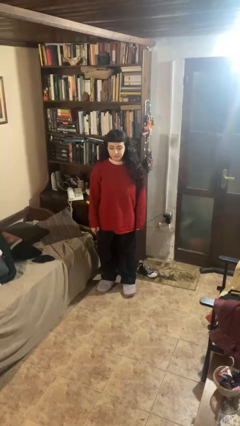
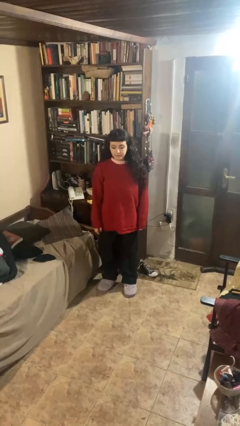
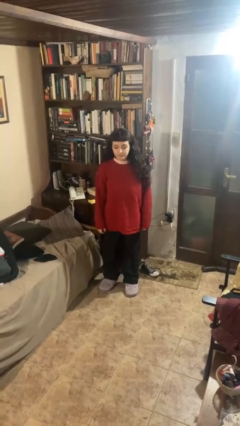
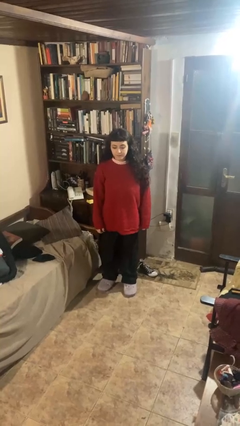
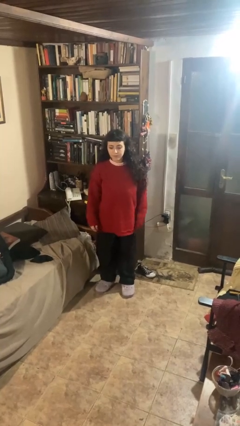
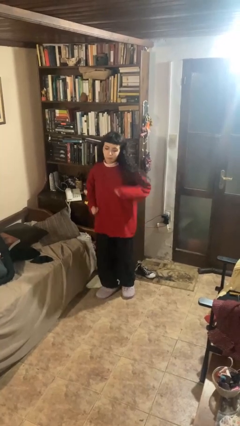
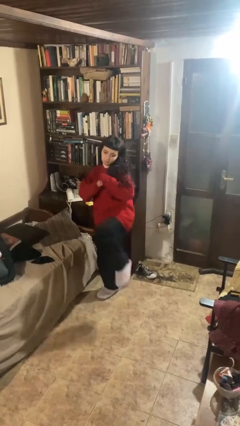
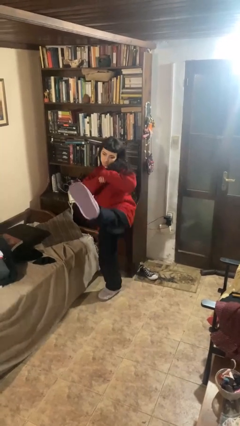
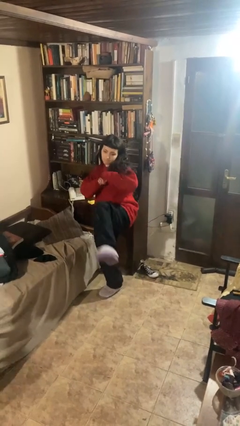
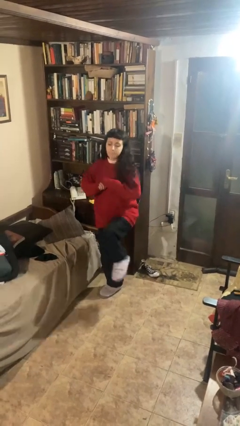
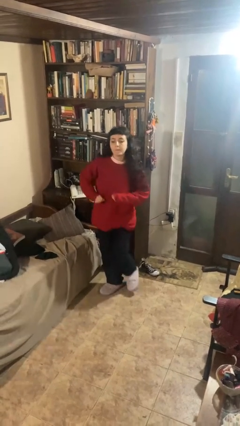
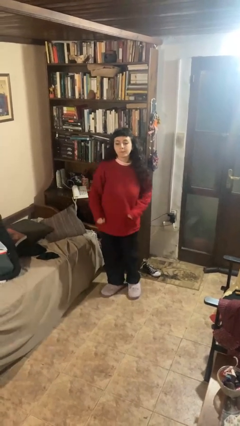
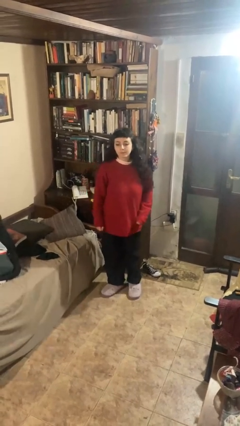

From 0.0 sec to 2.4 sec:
person karate kicks

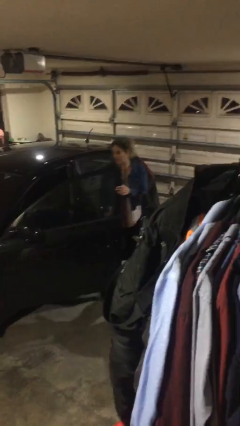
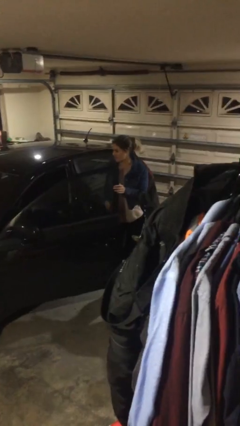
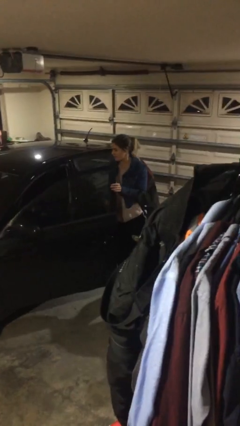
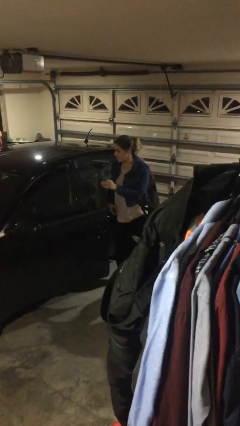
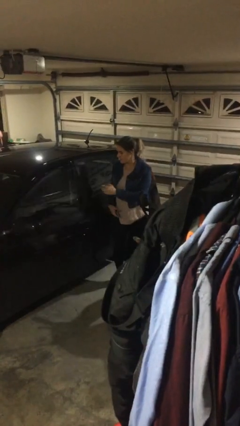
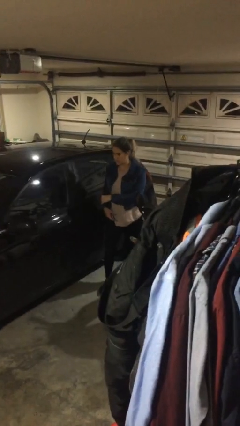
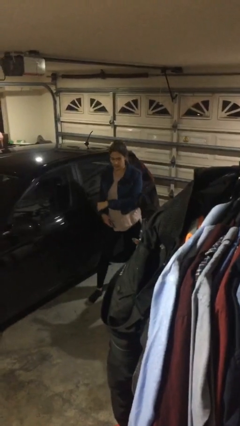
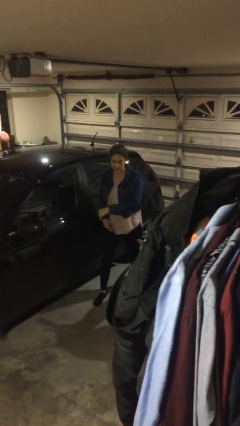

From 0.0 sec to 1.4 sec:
person closes car door

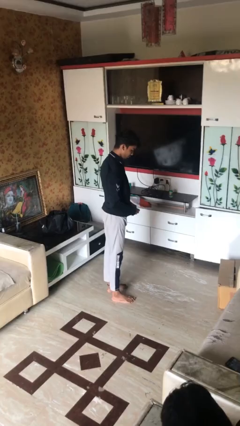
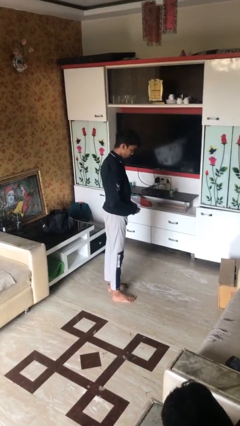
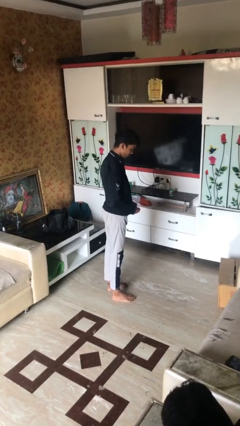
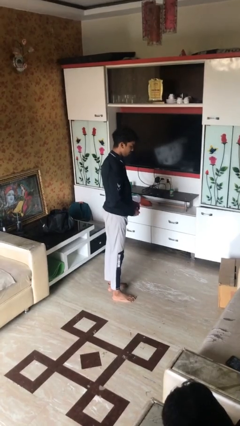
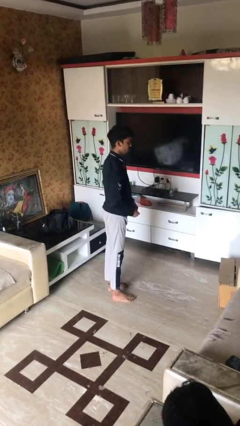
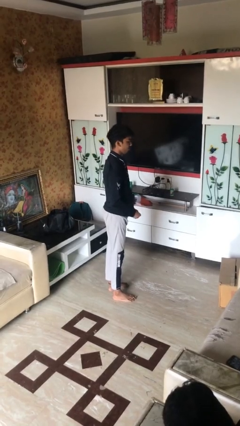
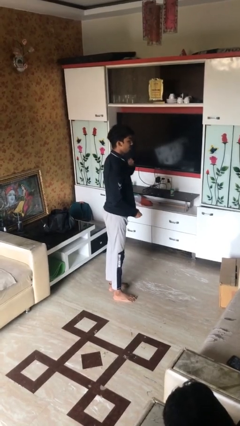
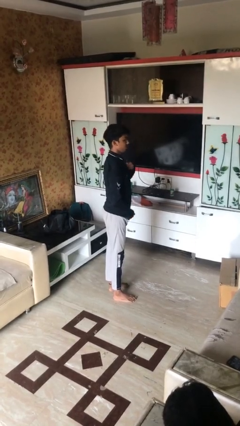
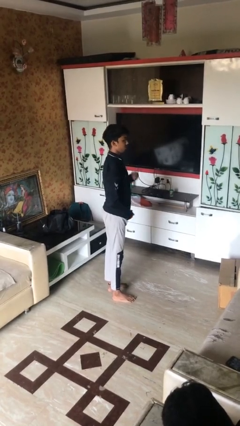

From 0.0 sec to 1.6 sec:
person zips up jacket

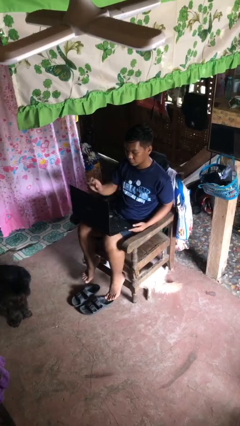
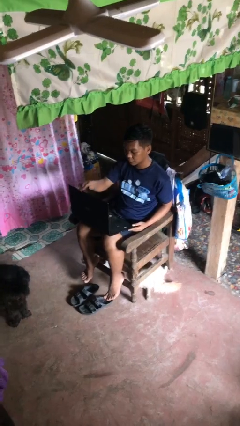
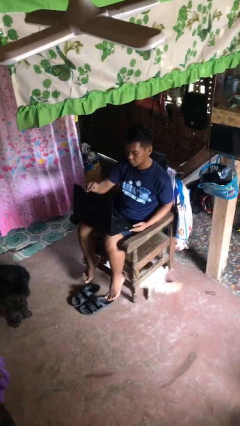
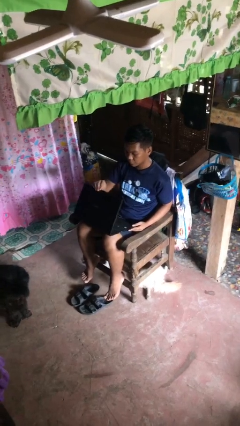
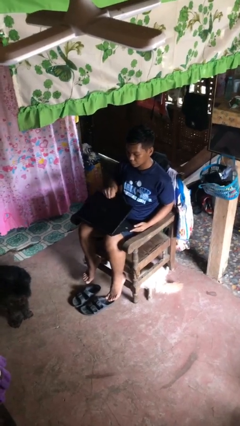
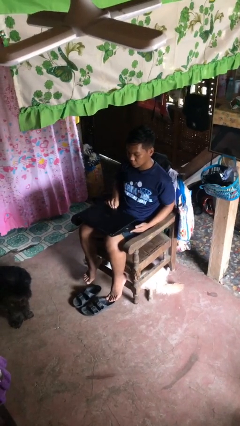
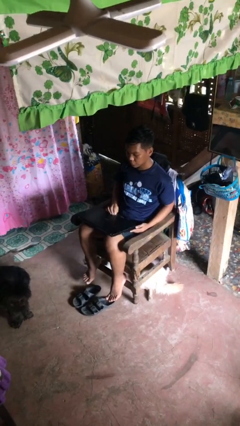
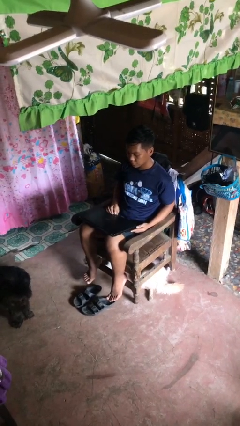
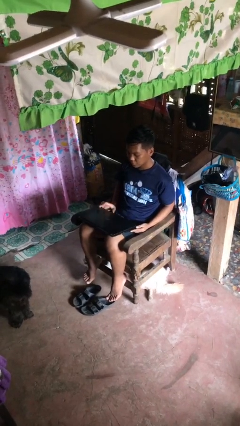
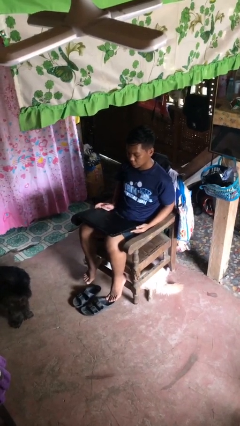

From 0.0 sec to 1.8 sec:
person closes laptop

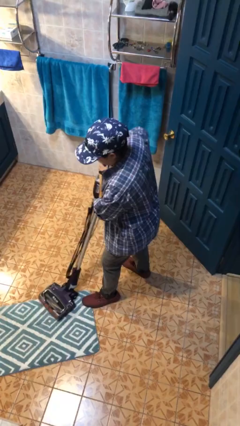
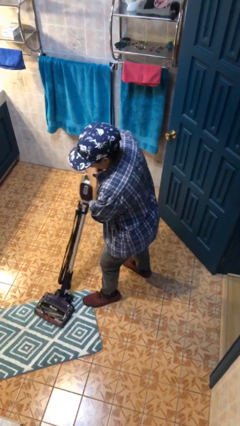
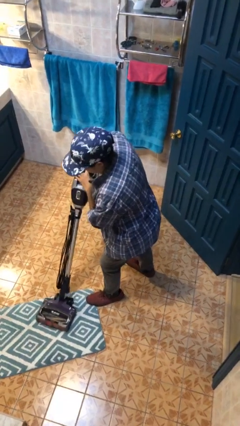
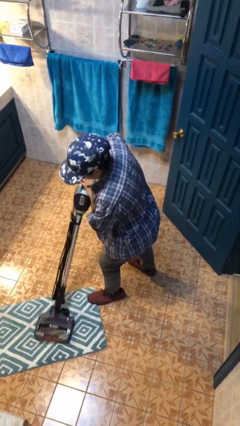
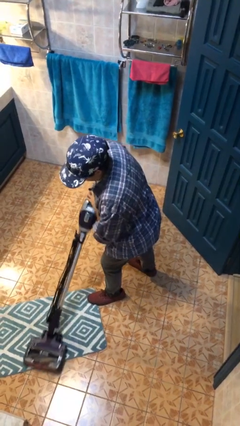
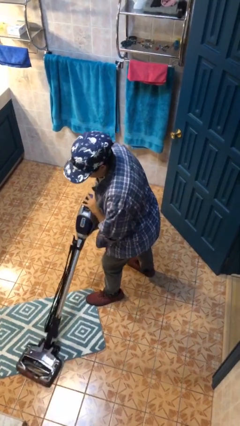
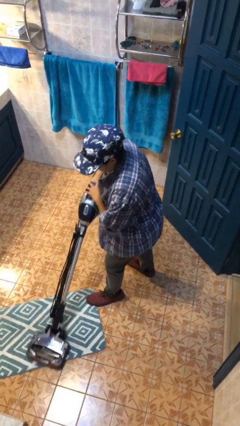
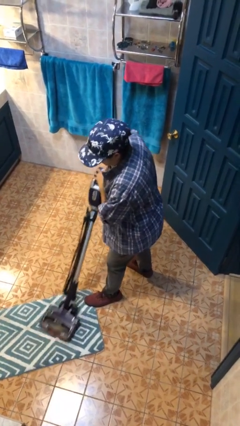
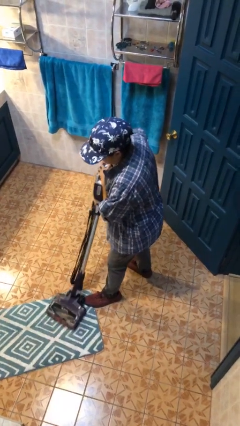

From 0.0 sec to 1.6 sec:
person vacuums carpet

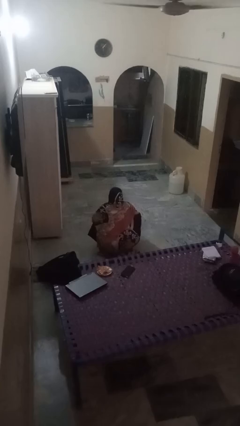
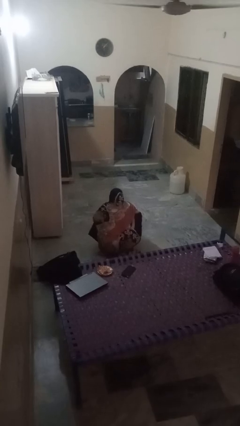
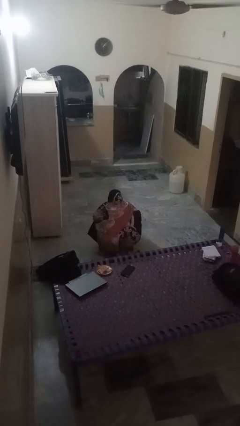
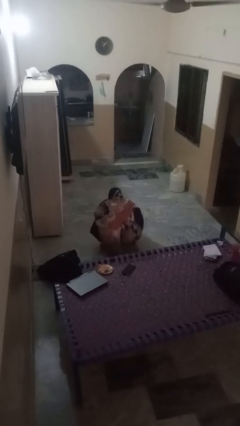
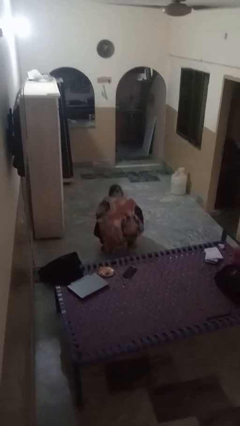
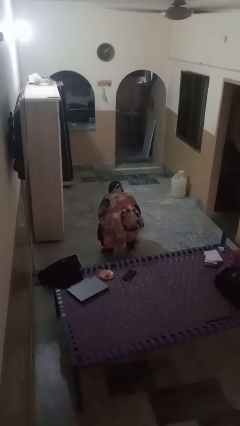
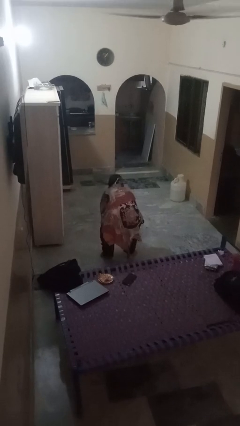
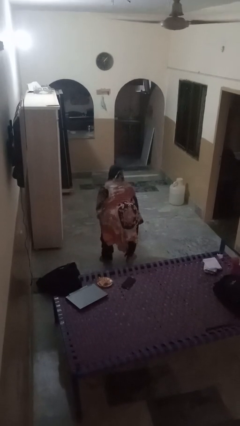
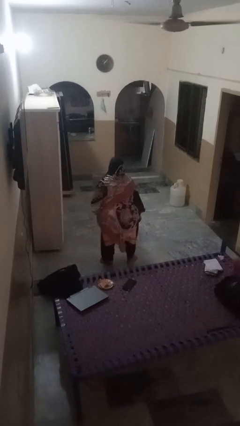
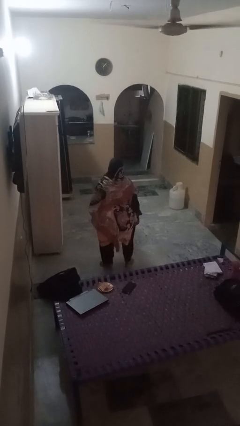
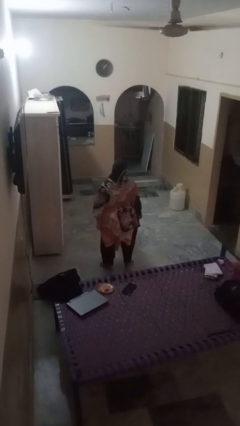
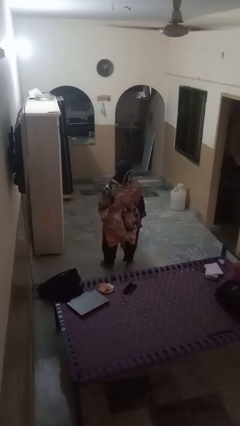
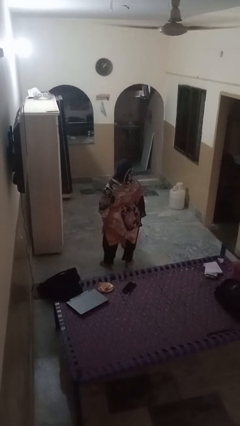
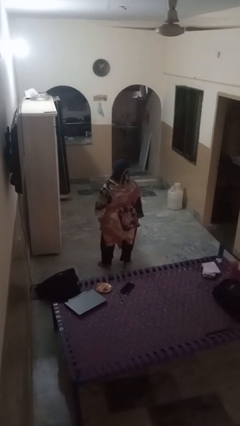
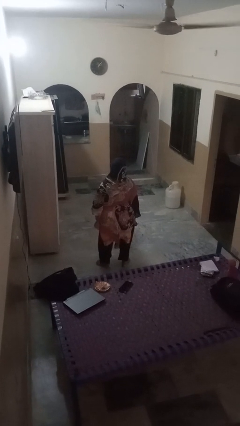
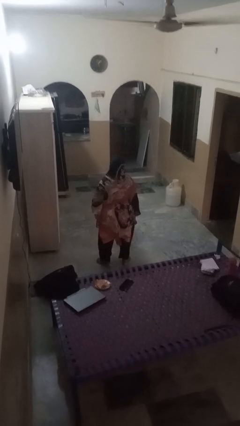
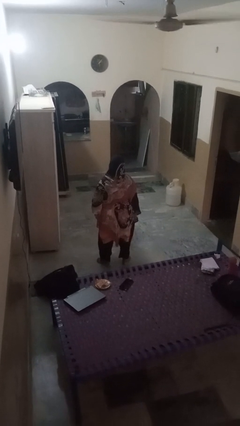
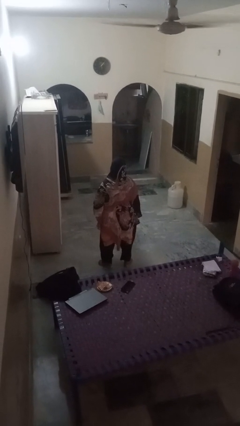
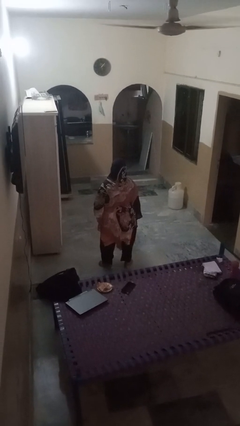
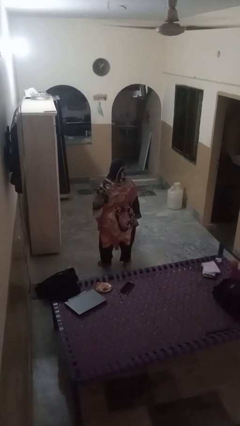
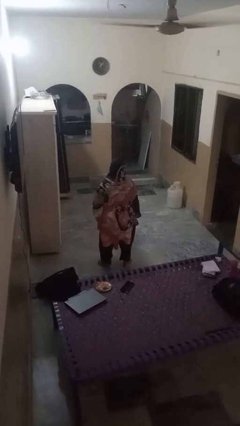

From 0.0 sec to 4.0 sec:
person stands up

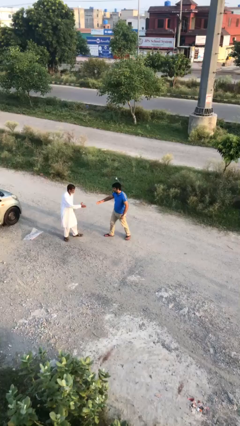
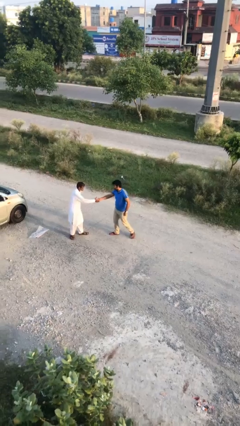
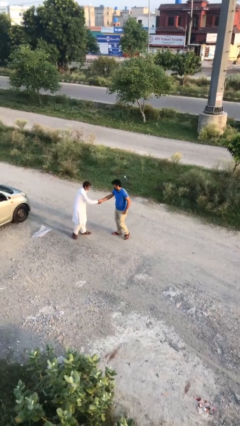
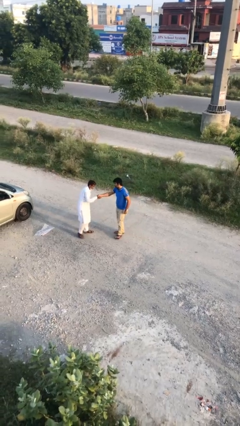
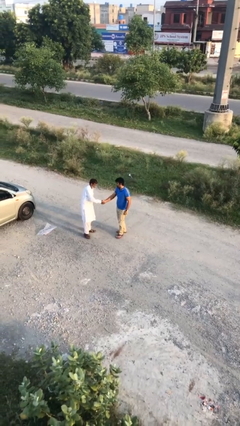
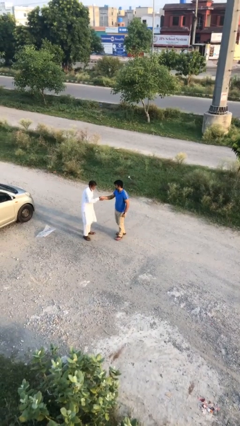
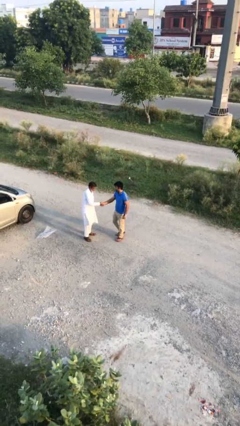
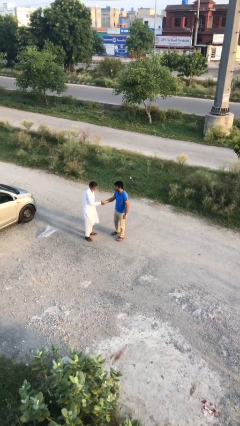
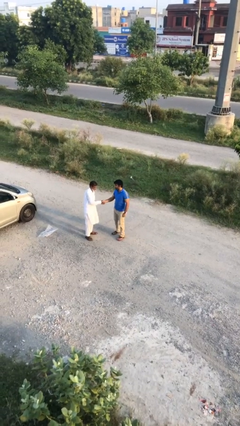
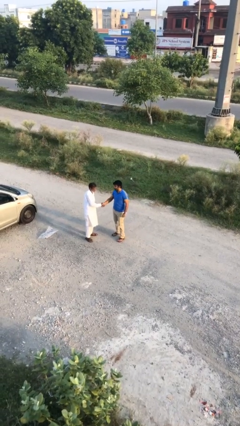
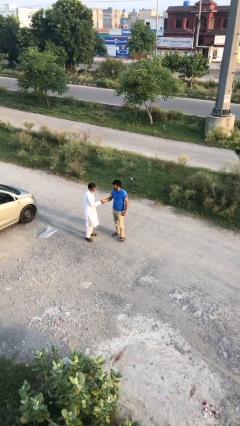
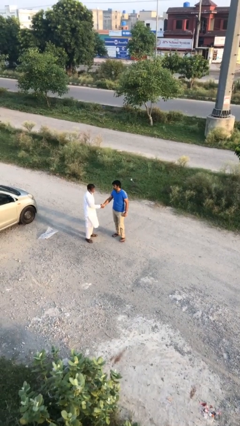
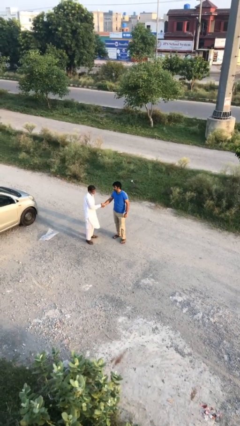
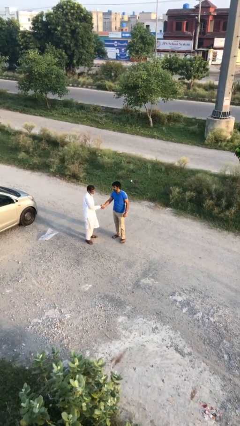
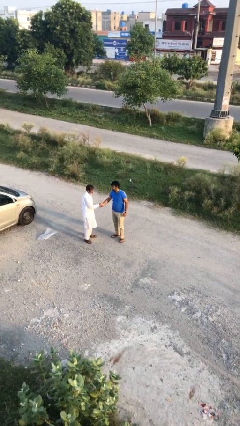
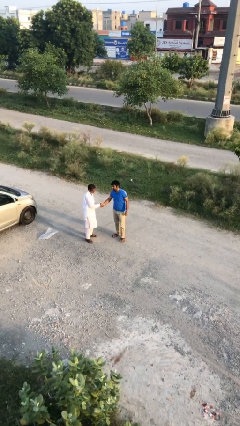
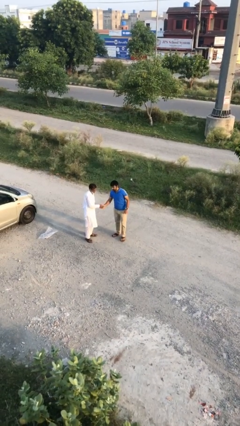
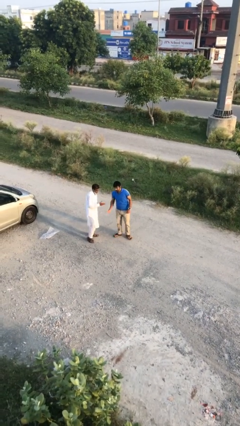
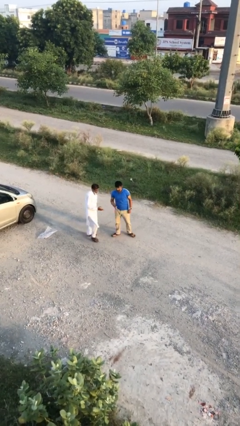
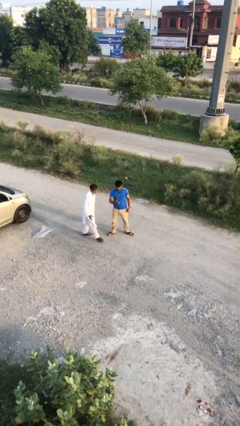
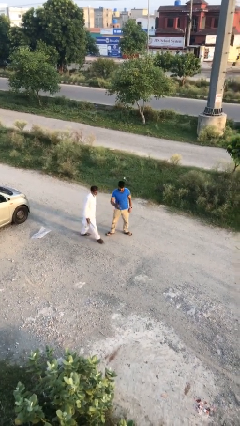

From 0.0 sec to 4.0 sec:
person shakes hand

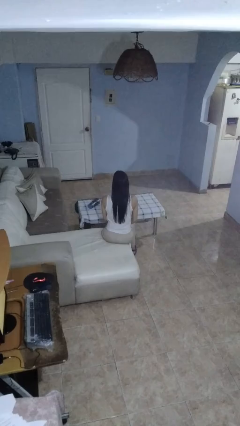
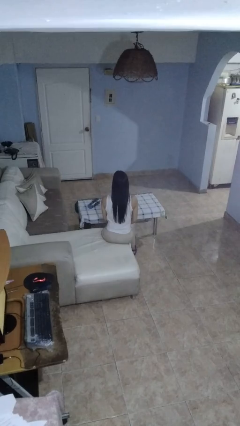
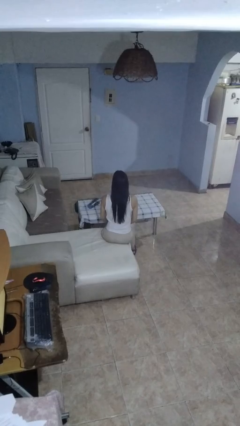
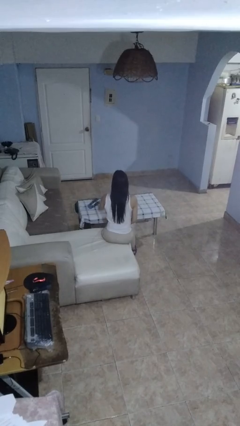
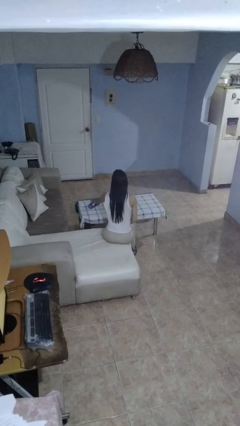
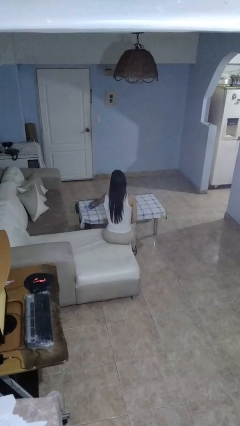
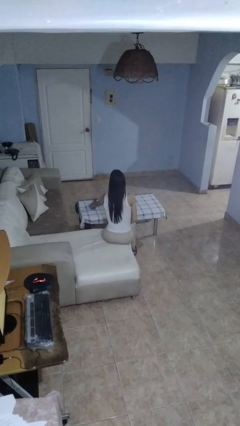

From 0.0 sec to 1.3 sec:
person sets upright glass
